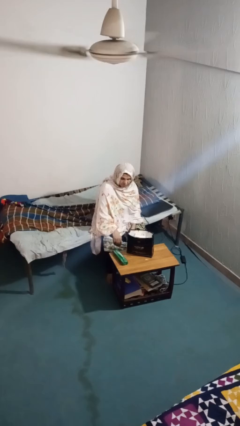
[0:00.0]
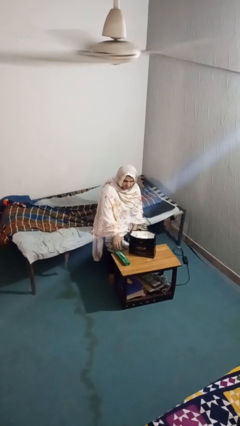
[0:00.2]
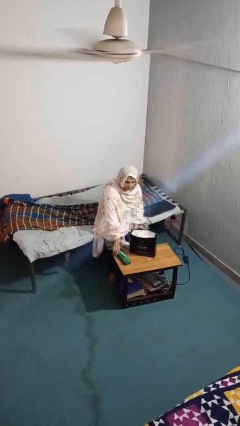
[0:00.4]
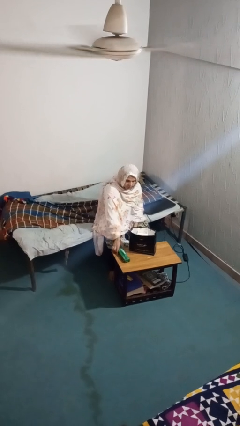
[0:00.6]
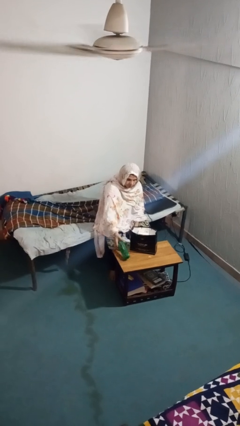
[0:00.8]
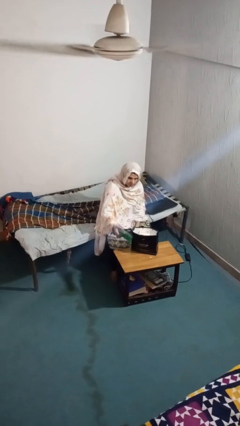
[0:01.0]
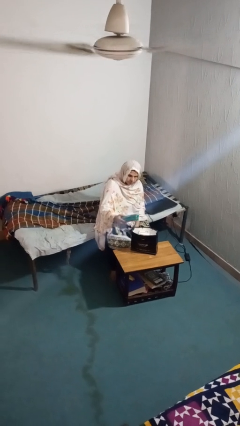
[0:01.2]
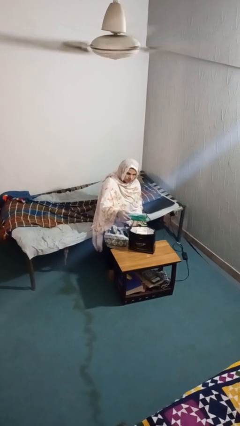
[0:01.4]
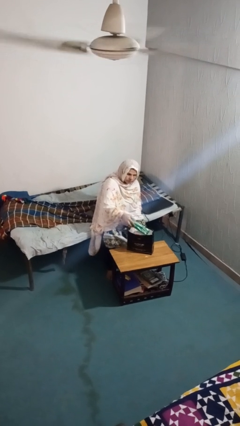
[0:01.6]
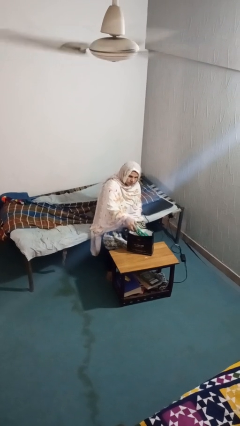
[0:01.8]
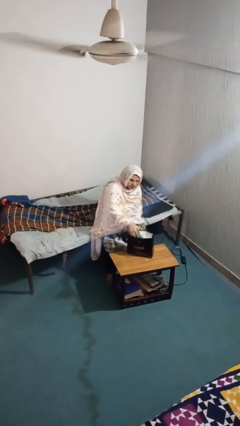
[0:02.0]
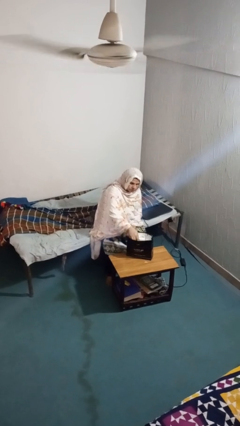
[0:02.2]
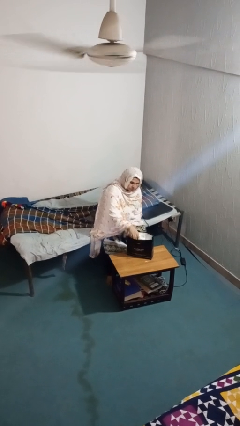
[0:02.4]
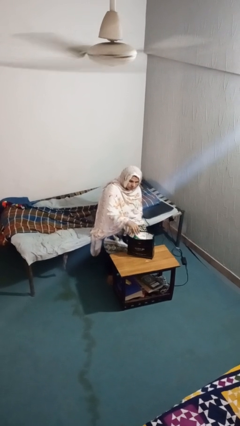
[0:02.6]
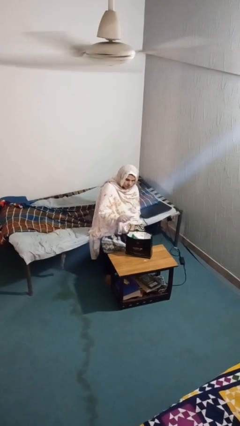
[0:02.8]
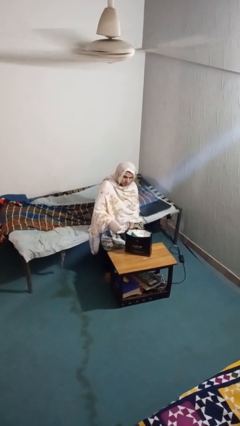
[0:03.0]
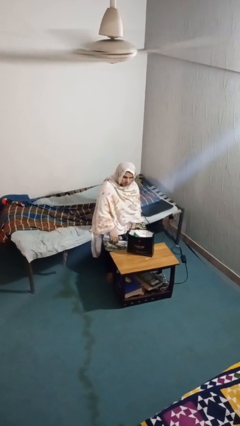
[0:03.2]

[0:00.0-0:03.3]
person puts object into bag

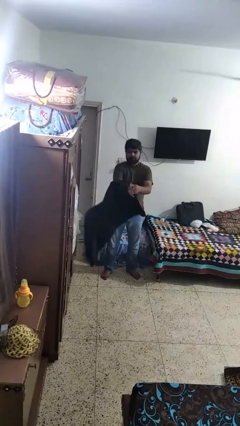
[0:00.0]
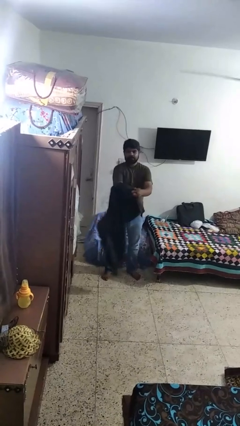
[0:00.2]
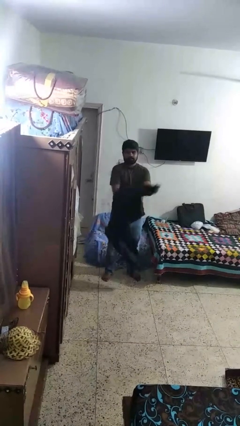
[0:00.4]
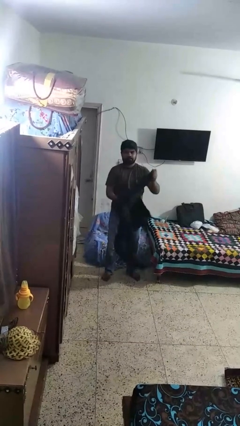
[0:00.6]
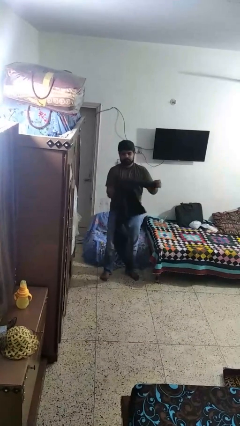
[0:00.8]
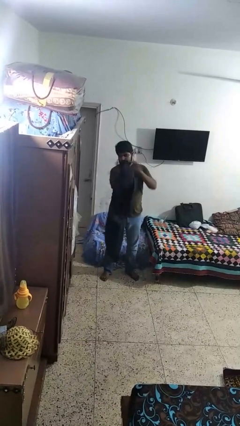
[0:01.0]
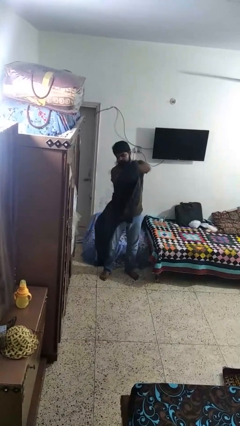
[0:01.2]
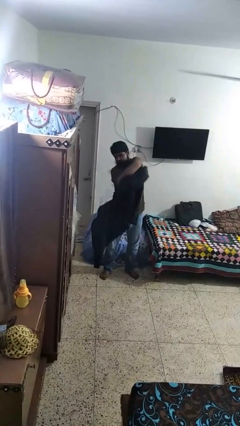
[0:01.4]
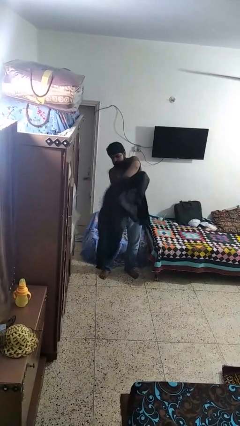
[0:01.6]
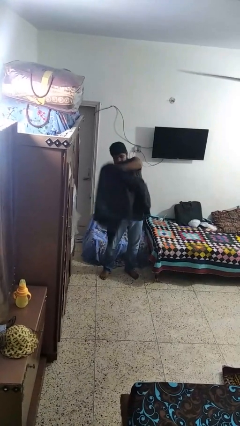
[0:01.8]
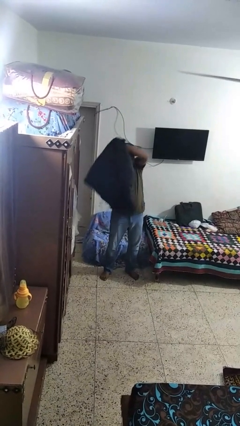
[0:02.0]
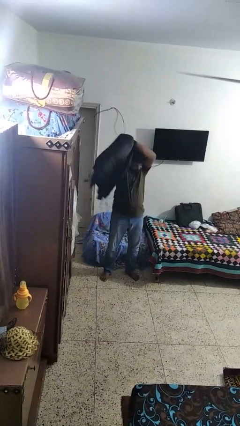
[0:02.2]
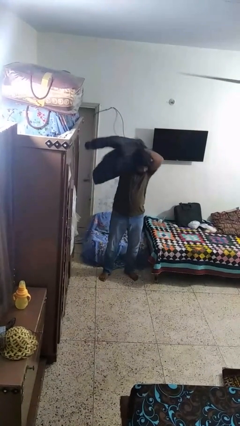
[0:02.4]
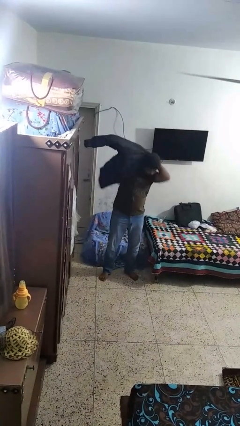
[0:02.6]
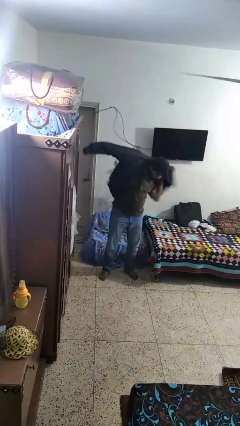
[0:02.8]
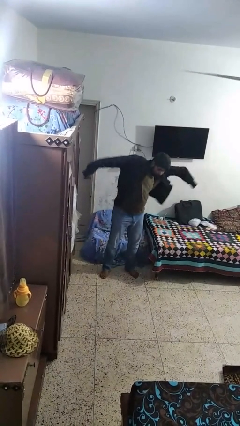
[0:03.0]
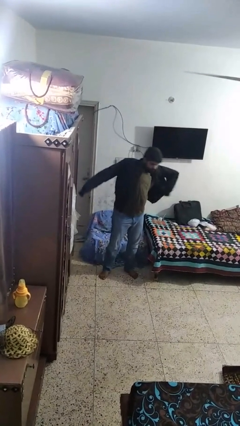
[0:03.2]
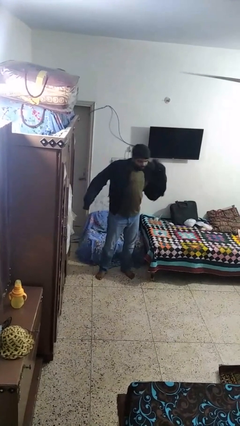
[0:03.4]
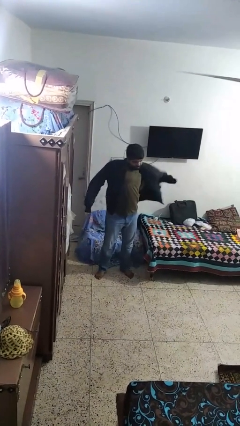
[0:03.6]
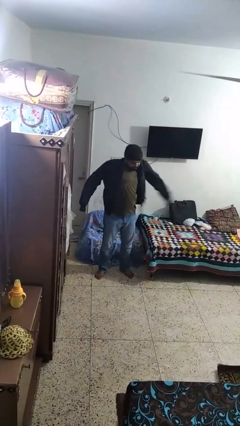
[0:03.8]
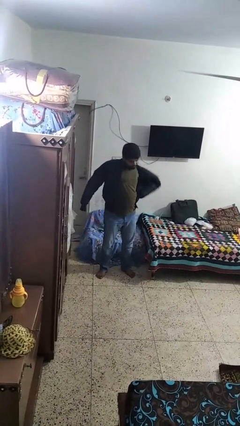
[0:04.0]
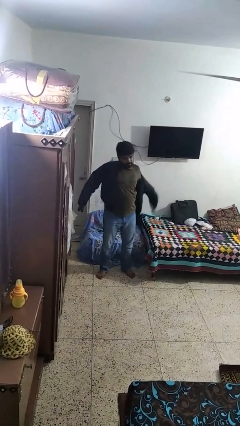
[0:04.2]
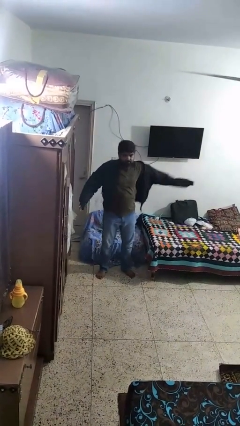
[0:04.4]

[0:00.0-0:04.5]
person puts on jacket

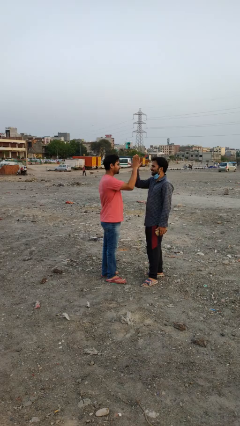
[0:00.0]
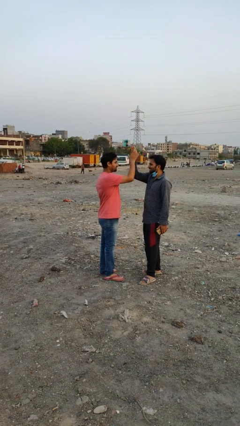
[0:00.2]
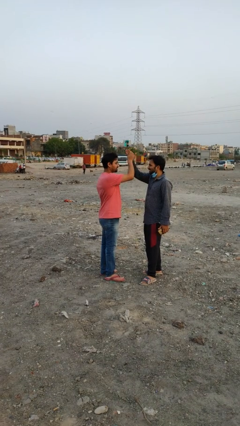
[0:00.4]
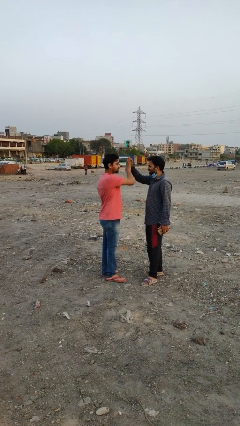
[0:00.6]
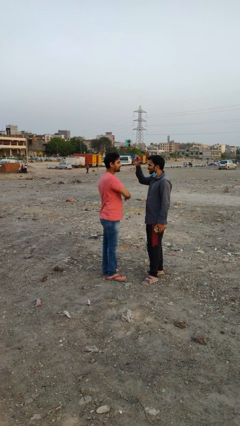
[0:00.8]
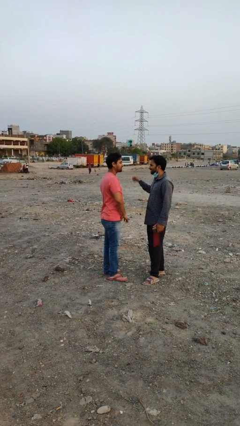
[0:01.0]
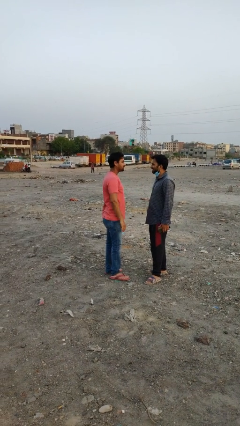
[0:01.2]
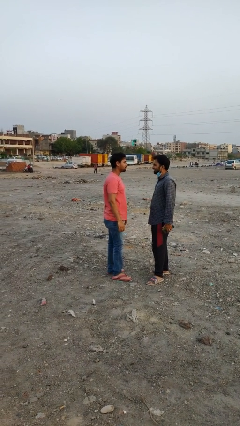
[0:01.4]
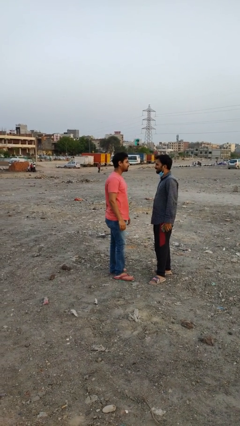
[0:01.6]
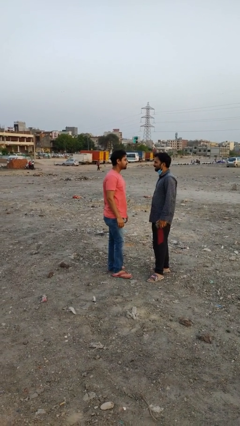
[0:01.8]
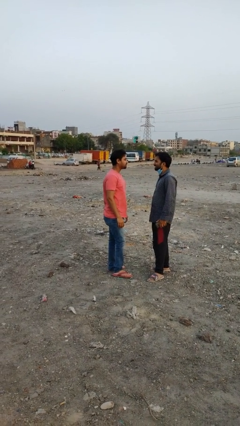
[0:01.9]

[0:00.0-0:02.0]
person highfives hand

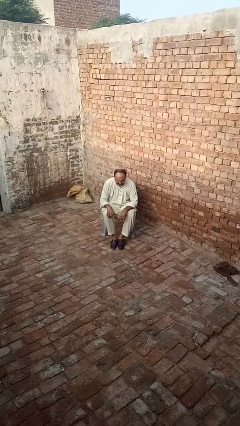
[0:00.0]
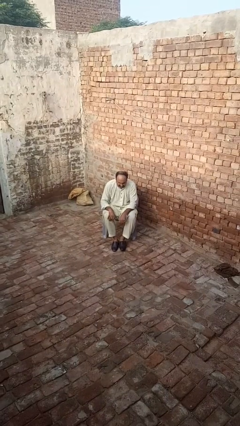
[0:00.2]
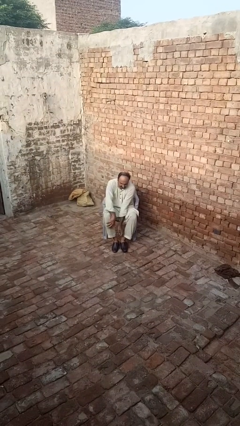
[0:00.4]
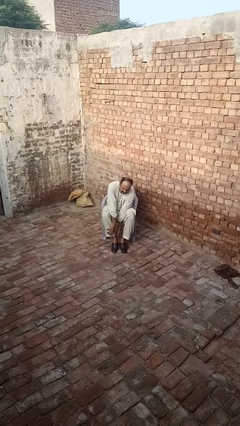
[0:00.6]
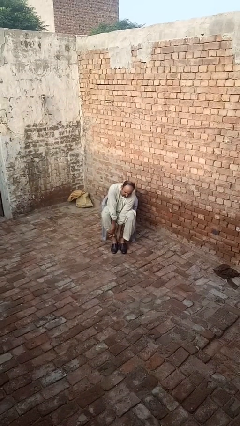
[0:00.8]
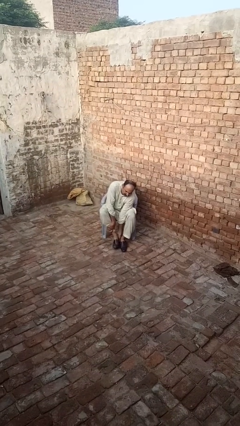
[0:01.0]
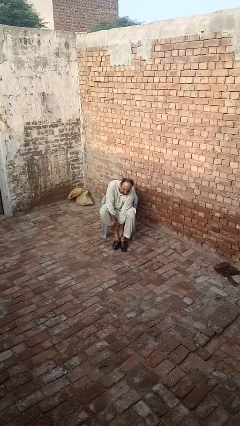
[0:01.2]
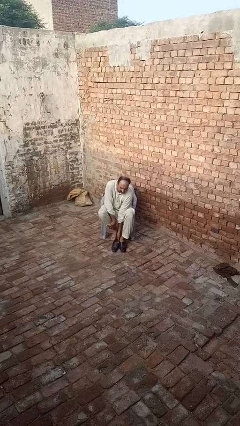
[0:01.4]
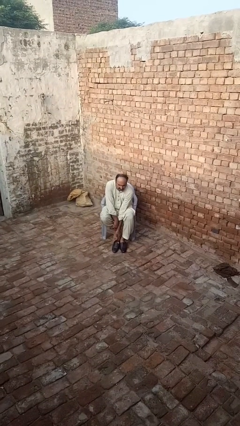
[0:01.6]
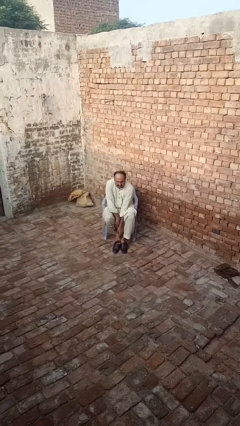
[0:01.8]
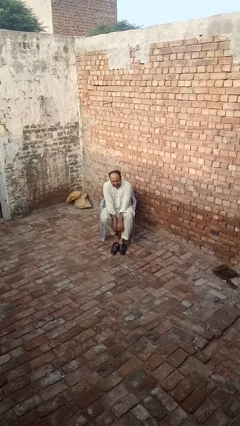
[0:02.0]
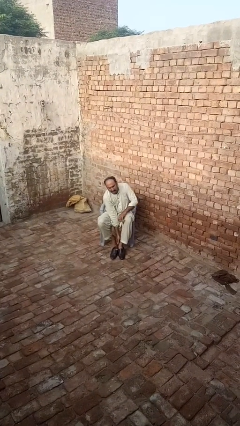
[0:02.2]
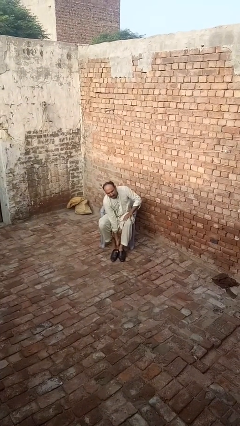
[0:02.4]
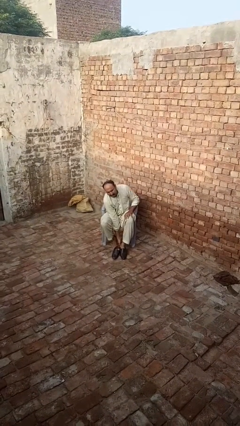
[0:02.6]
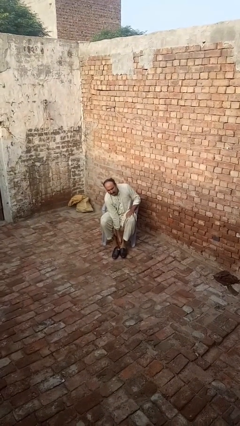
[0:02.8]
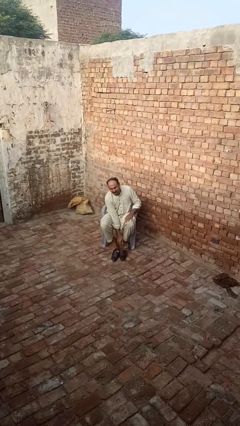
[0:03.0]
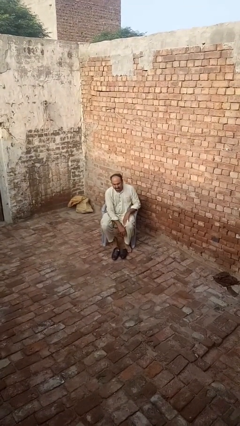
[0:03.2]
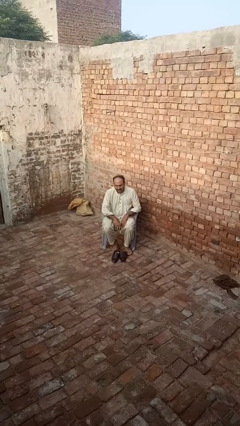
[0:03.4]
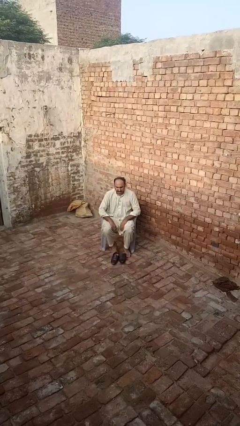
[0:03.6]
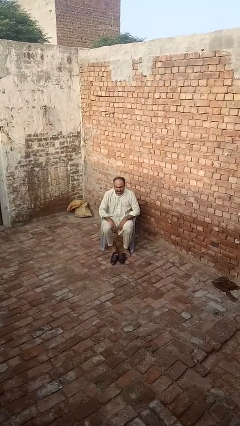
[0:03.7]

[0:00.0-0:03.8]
person takes off shoes

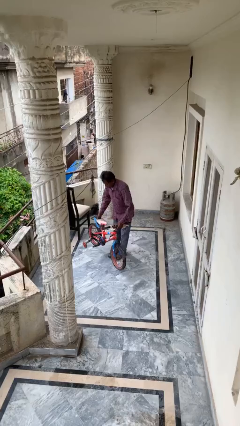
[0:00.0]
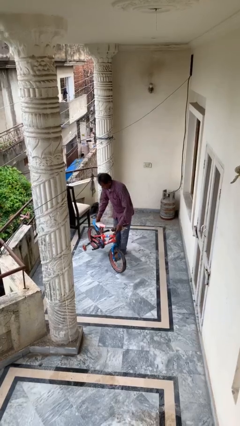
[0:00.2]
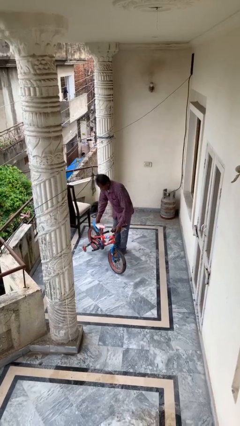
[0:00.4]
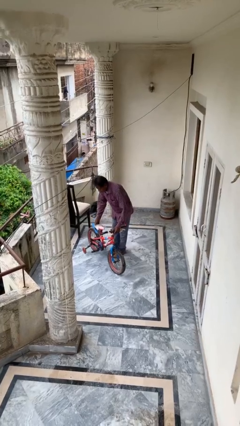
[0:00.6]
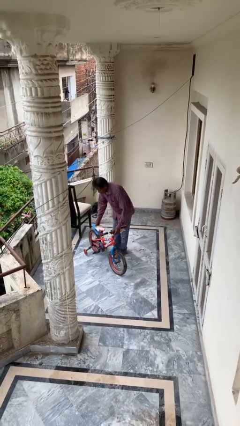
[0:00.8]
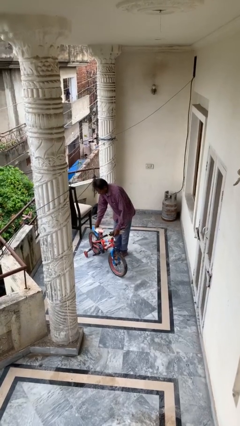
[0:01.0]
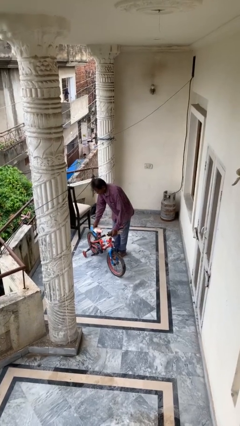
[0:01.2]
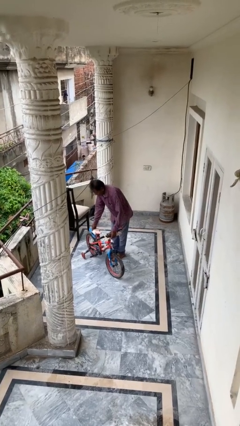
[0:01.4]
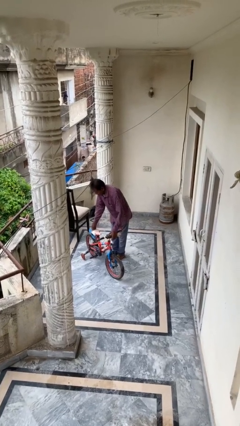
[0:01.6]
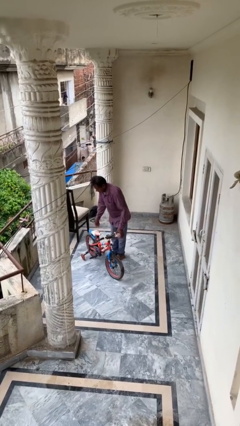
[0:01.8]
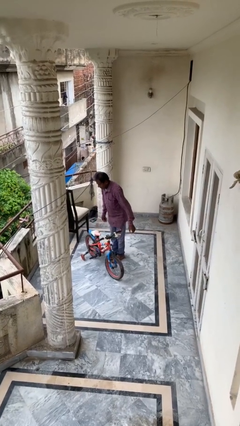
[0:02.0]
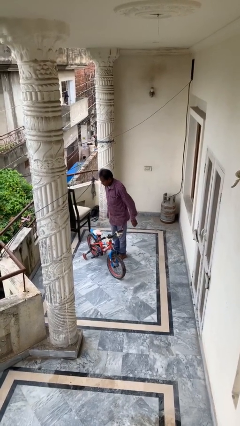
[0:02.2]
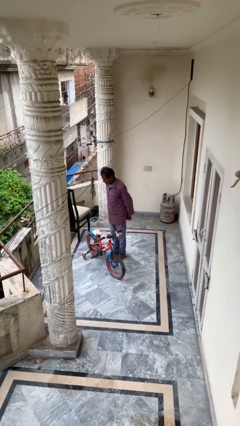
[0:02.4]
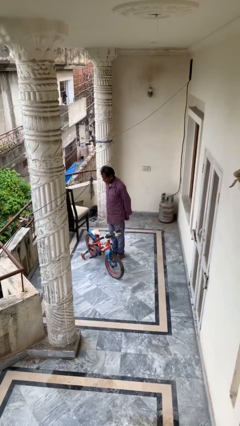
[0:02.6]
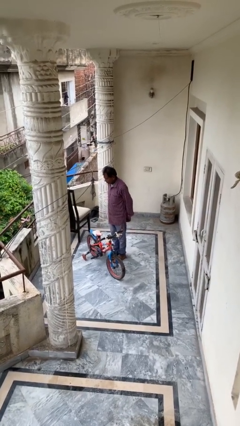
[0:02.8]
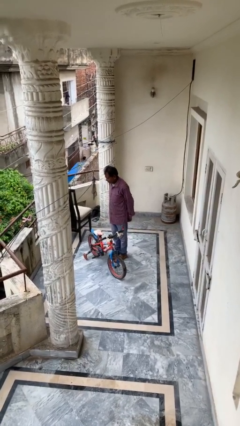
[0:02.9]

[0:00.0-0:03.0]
person puts down object on floor

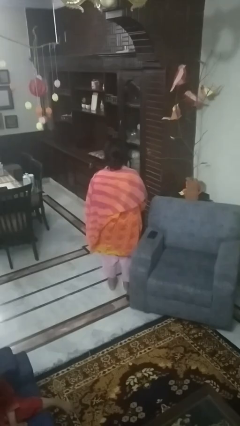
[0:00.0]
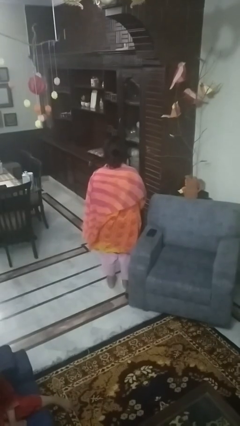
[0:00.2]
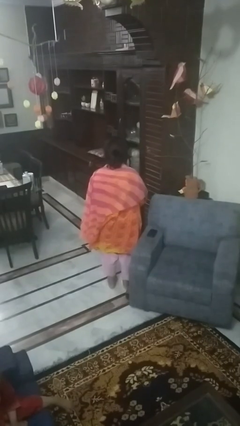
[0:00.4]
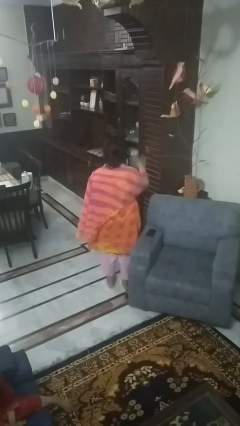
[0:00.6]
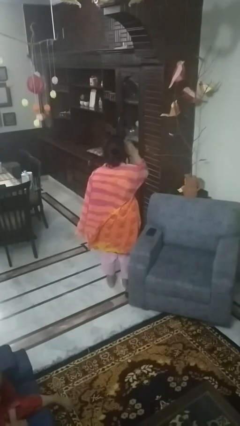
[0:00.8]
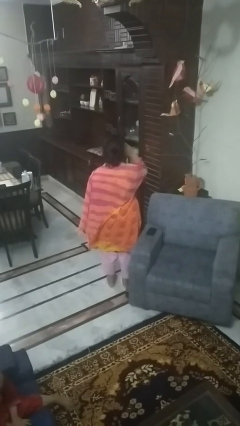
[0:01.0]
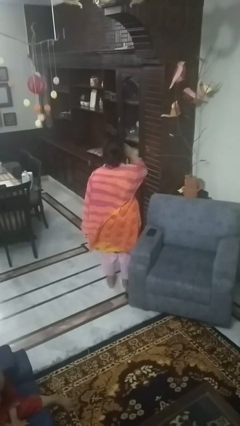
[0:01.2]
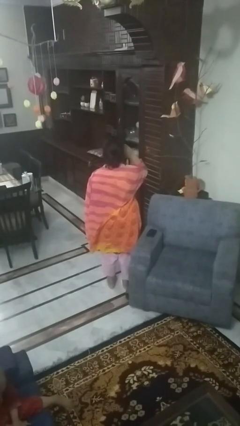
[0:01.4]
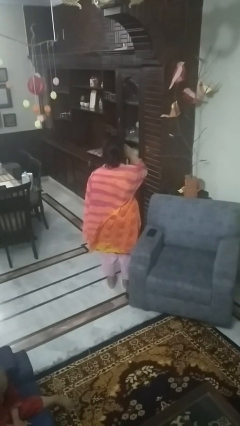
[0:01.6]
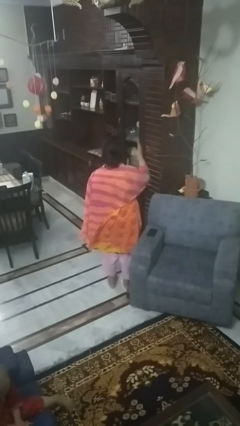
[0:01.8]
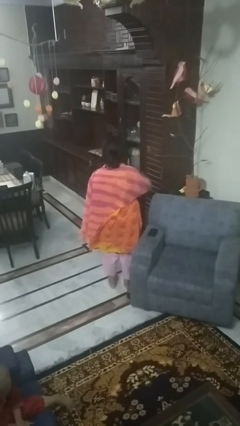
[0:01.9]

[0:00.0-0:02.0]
person salutes
